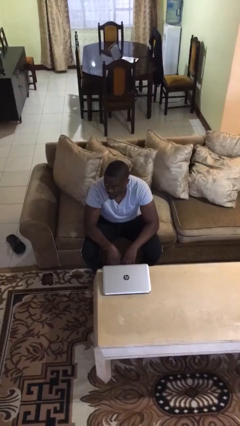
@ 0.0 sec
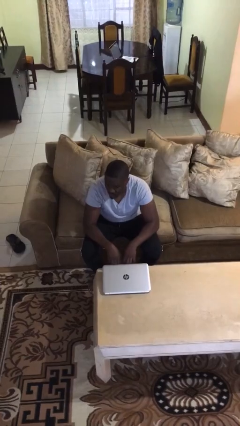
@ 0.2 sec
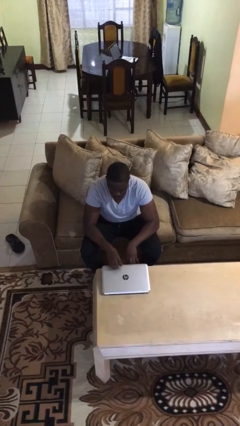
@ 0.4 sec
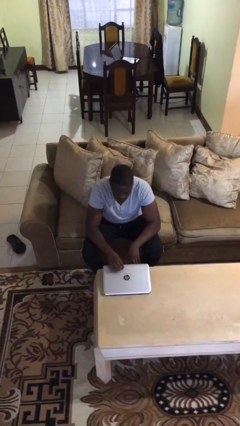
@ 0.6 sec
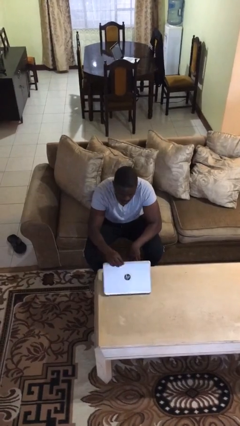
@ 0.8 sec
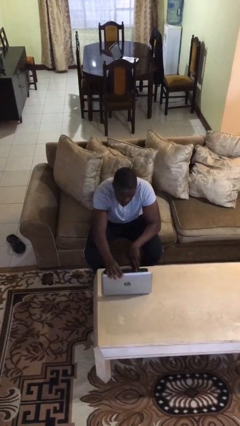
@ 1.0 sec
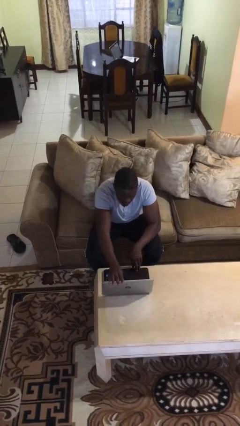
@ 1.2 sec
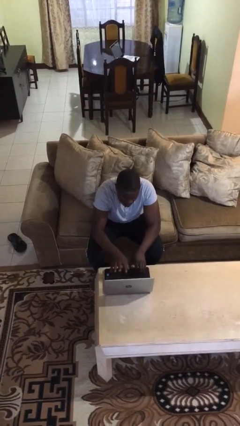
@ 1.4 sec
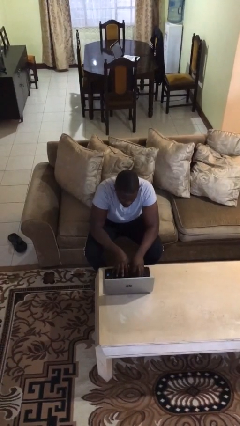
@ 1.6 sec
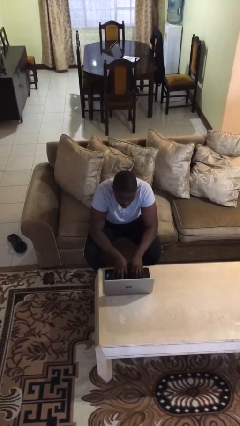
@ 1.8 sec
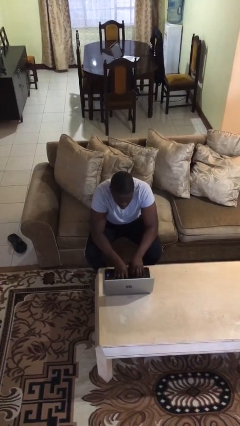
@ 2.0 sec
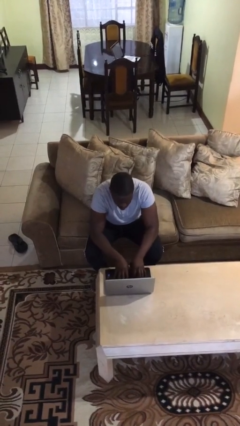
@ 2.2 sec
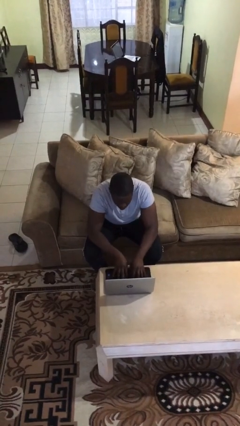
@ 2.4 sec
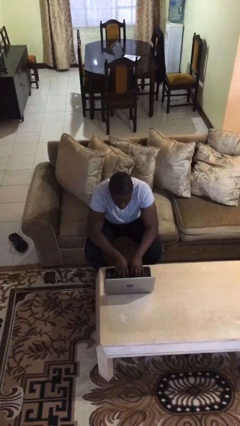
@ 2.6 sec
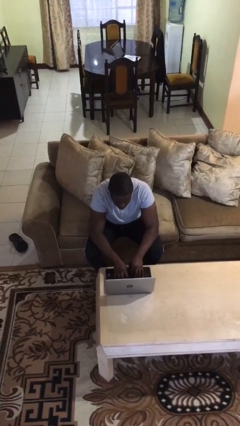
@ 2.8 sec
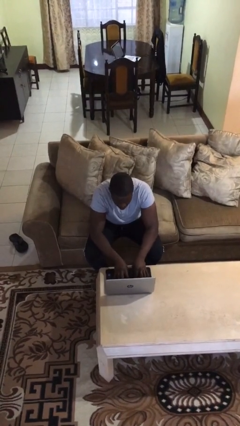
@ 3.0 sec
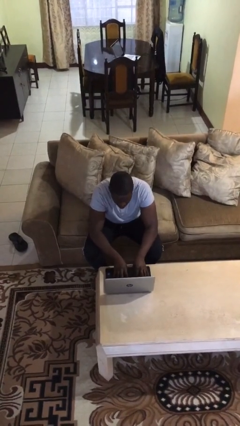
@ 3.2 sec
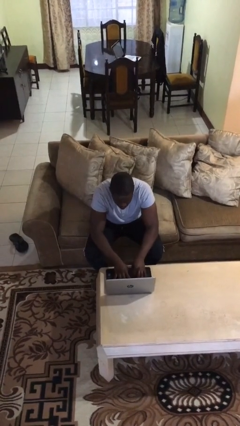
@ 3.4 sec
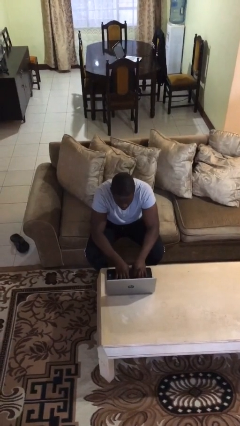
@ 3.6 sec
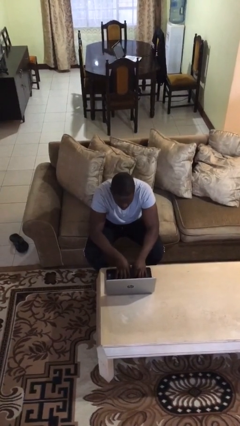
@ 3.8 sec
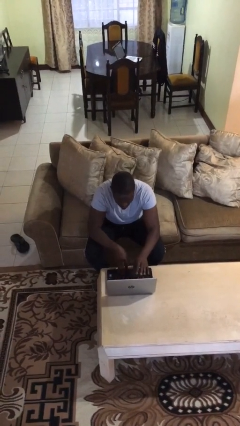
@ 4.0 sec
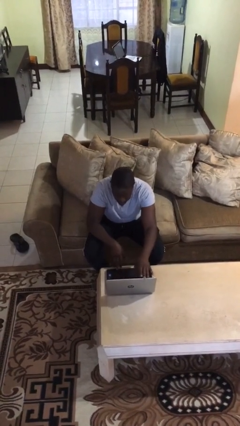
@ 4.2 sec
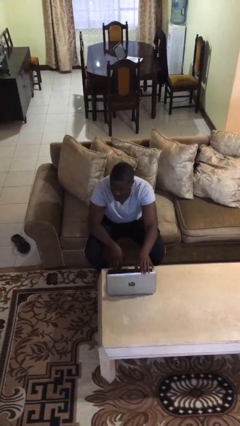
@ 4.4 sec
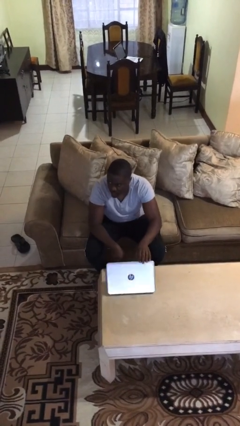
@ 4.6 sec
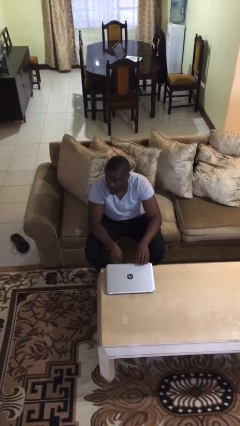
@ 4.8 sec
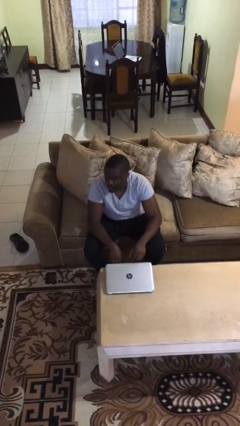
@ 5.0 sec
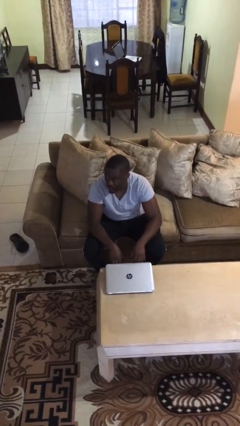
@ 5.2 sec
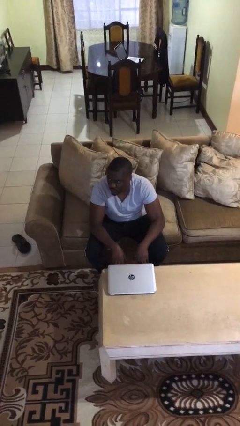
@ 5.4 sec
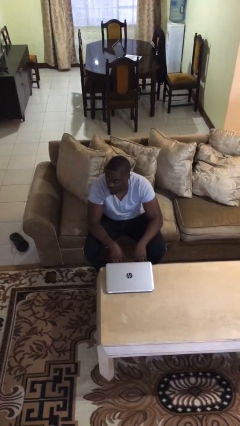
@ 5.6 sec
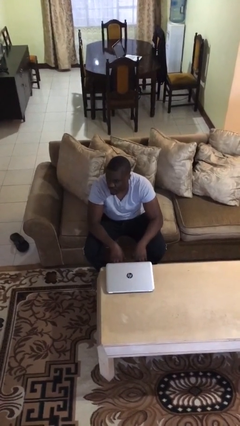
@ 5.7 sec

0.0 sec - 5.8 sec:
person interacts with laptop

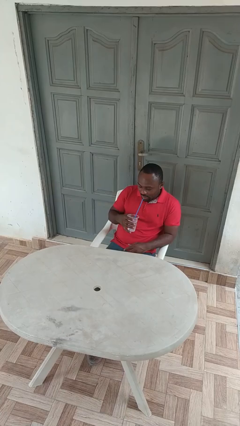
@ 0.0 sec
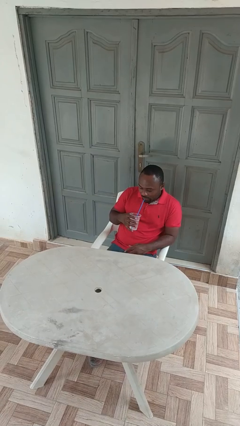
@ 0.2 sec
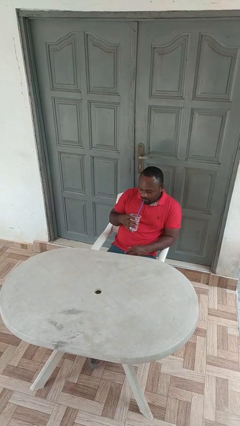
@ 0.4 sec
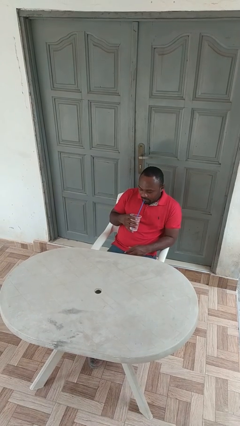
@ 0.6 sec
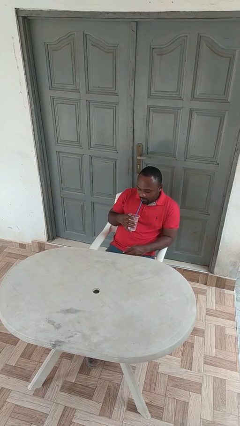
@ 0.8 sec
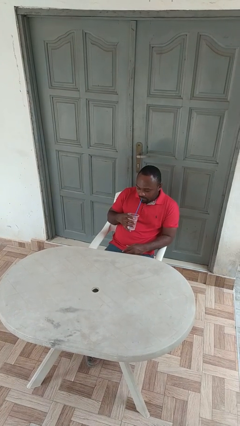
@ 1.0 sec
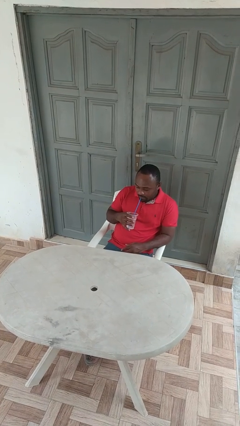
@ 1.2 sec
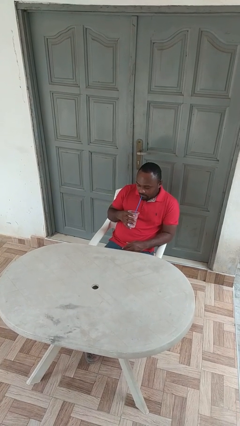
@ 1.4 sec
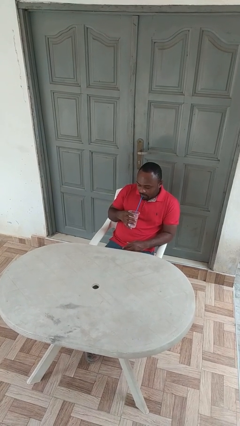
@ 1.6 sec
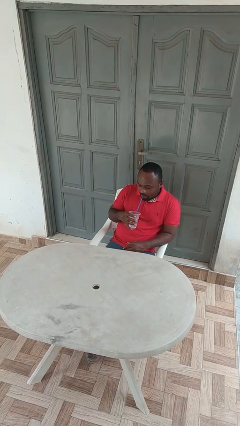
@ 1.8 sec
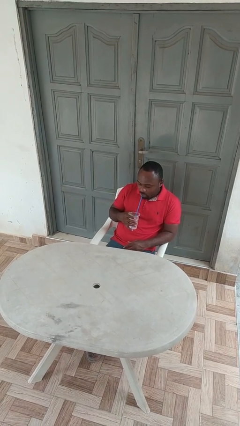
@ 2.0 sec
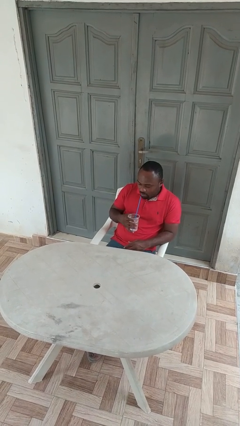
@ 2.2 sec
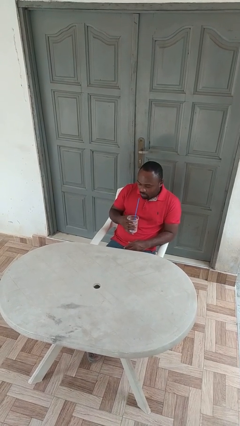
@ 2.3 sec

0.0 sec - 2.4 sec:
person drinks from straw

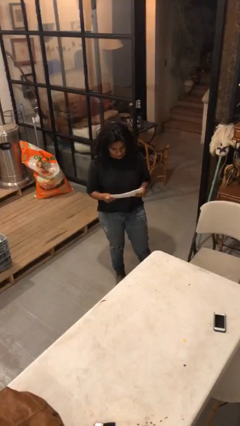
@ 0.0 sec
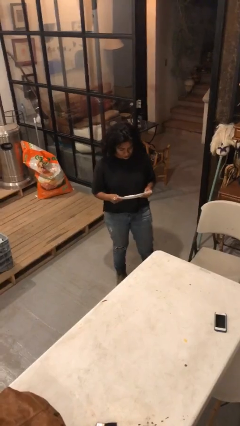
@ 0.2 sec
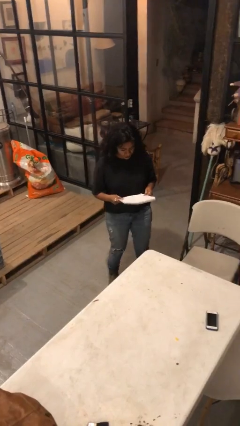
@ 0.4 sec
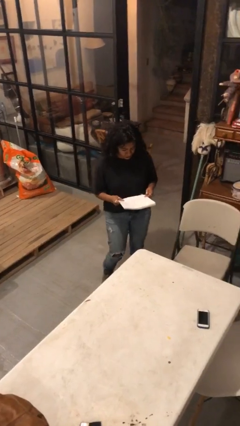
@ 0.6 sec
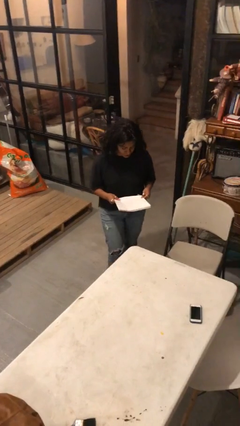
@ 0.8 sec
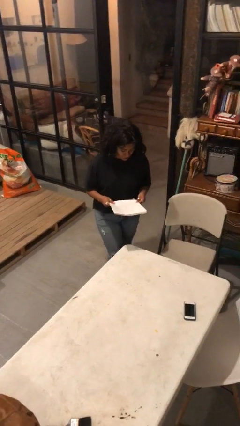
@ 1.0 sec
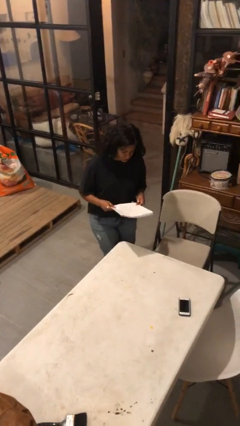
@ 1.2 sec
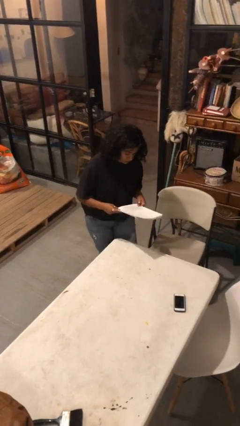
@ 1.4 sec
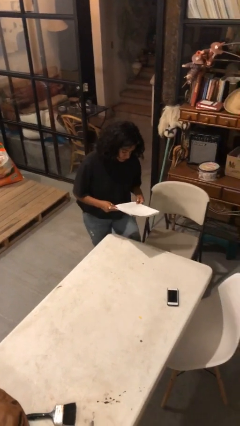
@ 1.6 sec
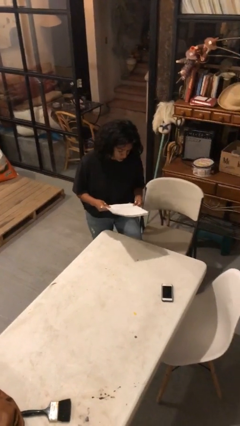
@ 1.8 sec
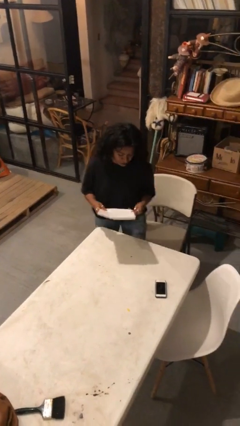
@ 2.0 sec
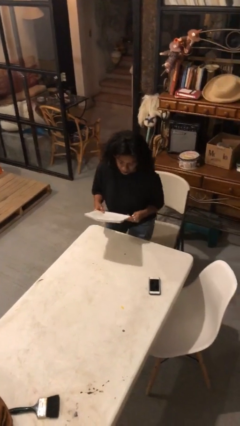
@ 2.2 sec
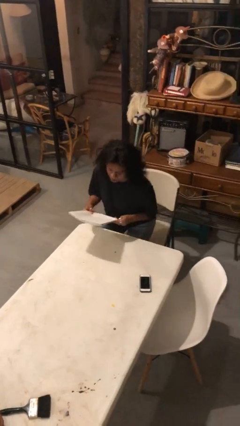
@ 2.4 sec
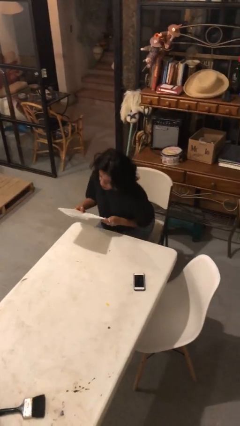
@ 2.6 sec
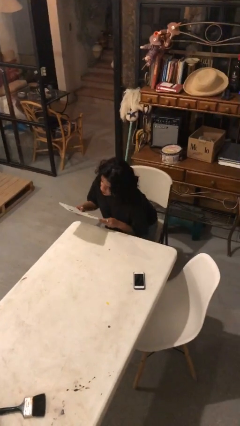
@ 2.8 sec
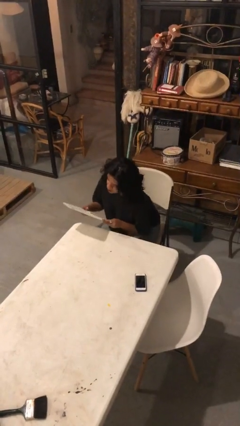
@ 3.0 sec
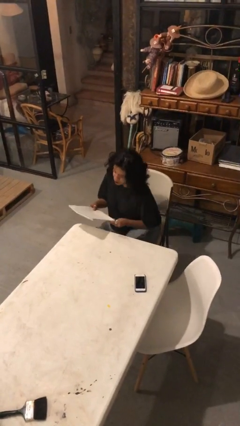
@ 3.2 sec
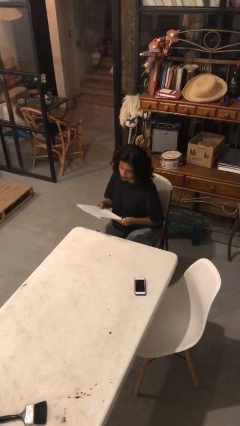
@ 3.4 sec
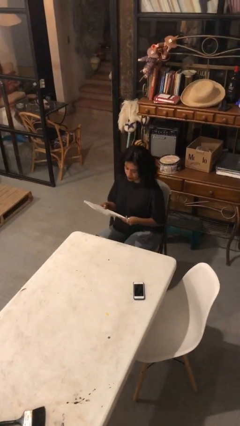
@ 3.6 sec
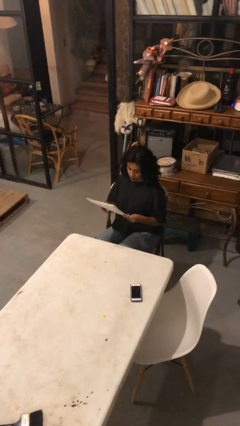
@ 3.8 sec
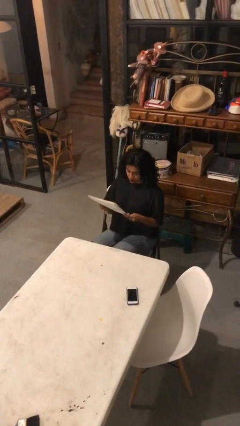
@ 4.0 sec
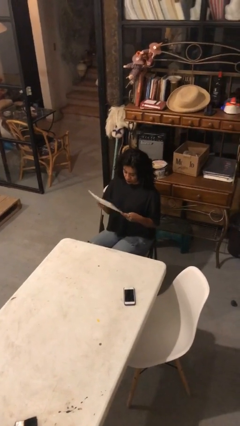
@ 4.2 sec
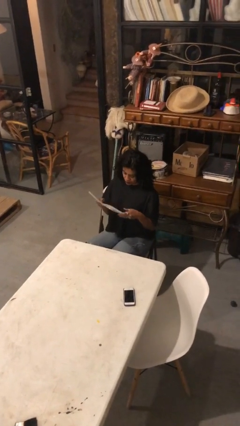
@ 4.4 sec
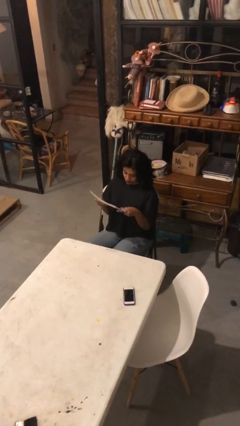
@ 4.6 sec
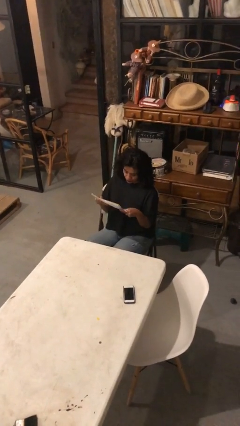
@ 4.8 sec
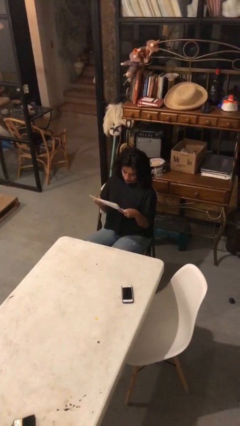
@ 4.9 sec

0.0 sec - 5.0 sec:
person sits down

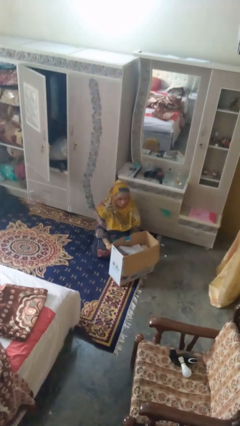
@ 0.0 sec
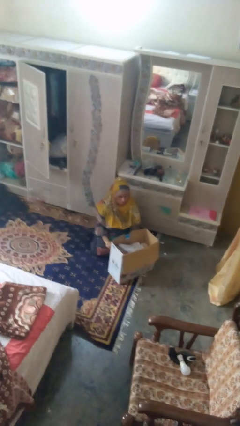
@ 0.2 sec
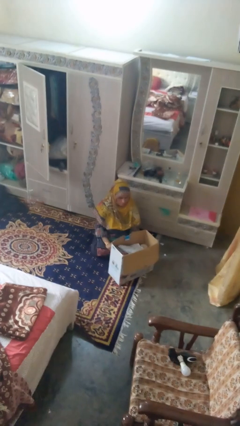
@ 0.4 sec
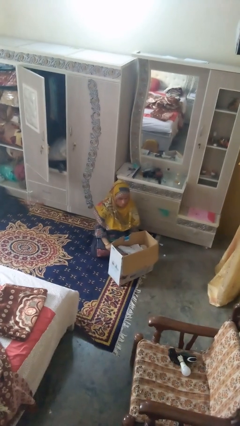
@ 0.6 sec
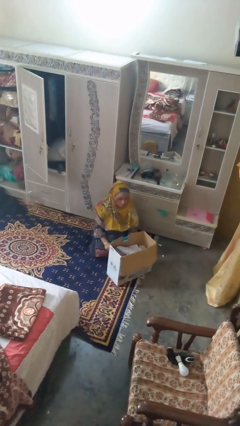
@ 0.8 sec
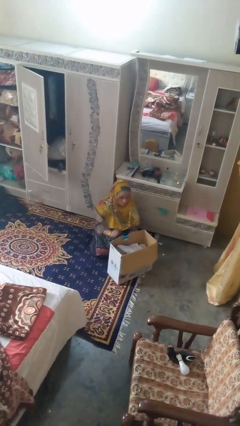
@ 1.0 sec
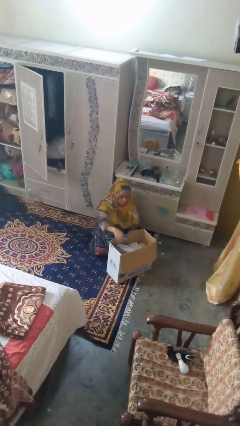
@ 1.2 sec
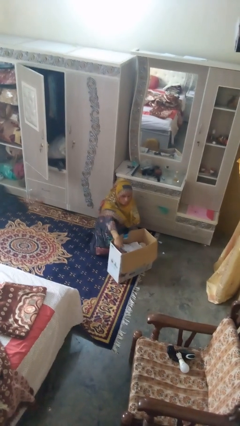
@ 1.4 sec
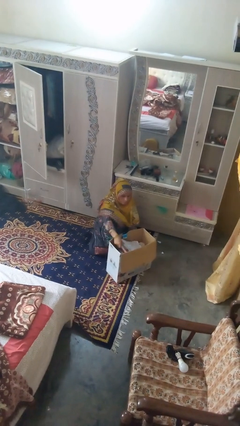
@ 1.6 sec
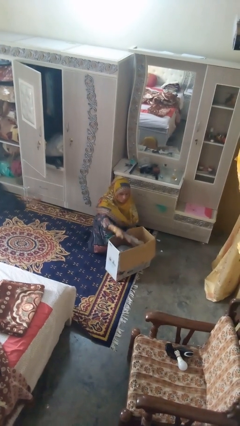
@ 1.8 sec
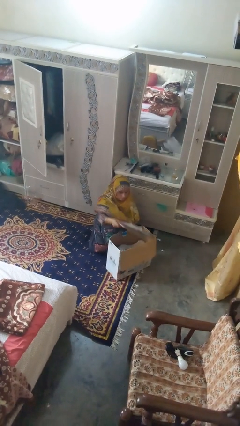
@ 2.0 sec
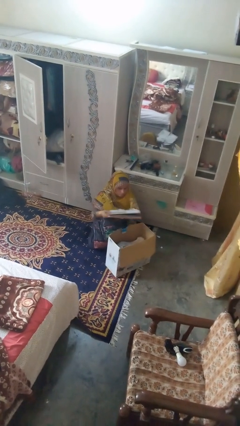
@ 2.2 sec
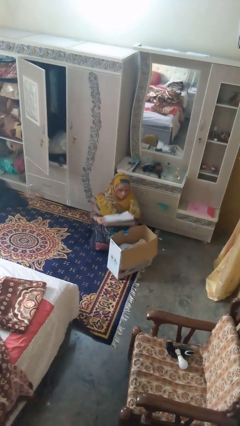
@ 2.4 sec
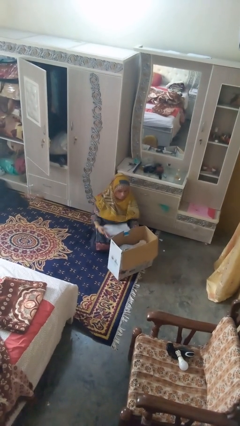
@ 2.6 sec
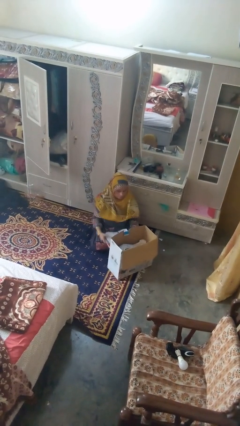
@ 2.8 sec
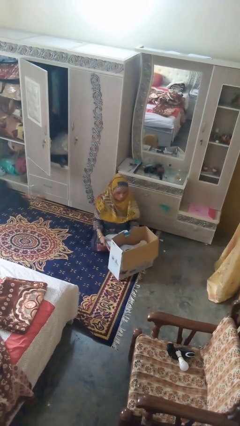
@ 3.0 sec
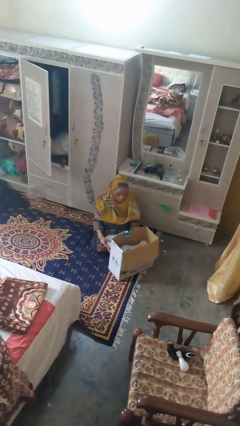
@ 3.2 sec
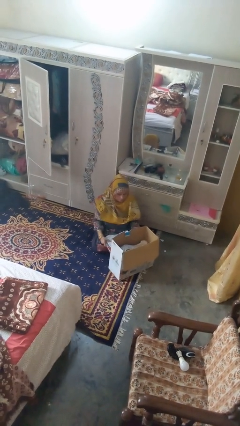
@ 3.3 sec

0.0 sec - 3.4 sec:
person takes object from box

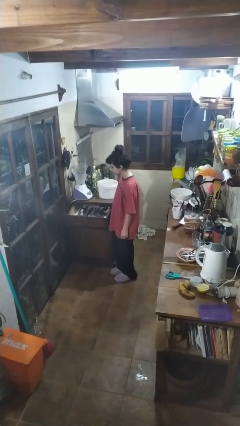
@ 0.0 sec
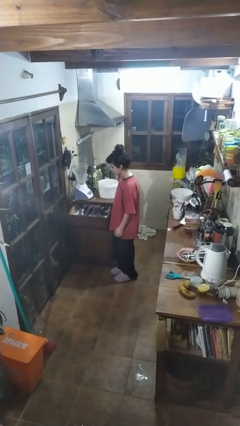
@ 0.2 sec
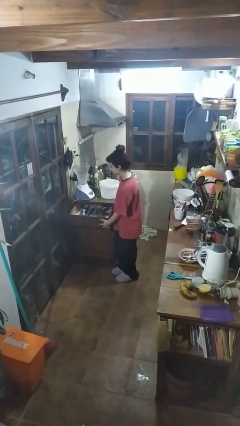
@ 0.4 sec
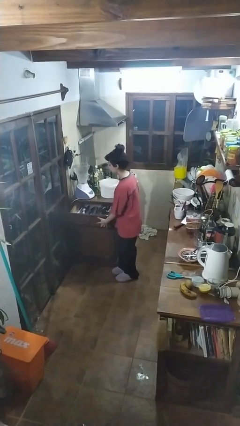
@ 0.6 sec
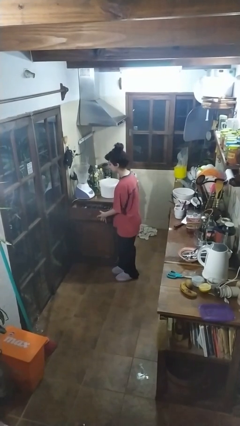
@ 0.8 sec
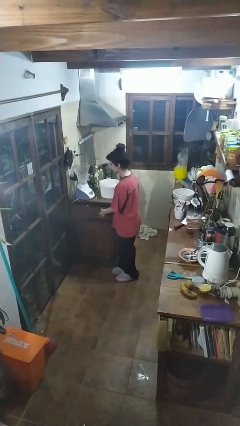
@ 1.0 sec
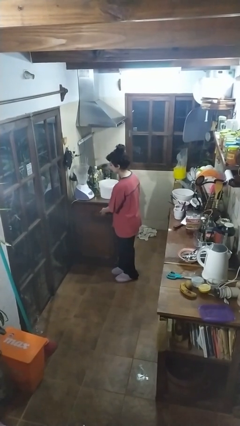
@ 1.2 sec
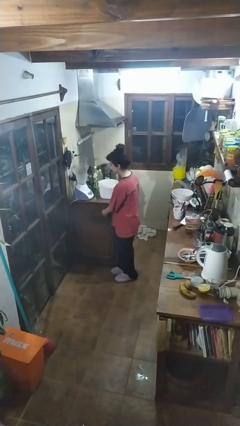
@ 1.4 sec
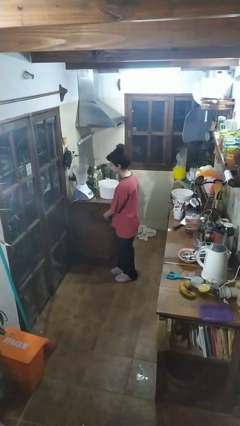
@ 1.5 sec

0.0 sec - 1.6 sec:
person closes kitchen drawer
